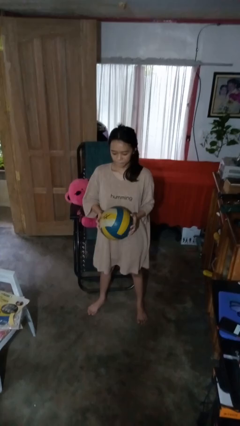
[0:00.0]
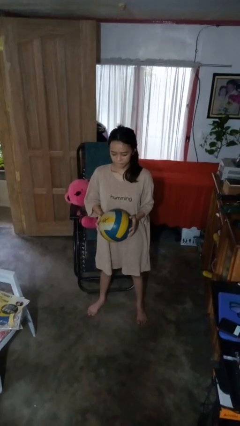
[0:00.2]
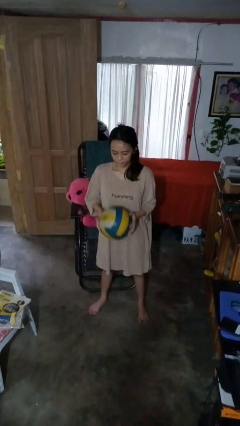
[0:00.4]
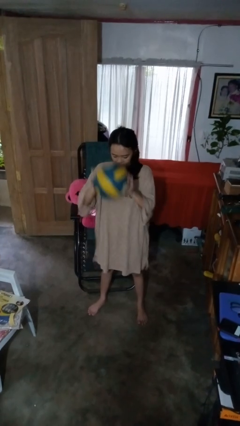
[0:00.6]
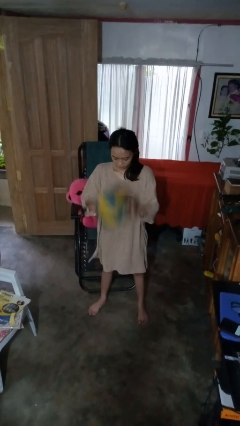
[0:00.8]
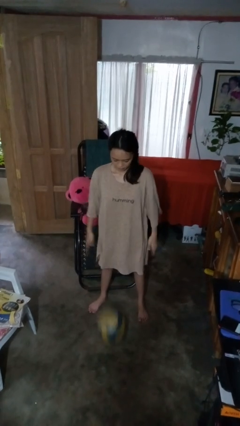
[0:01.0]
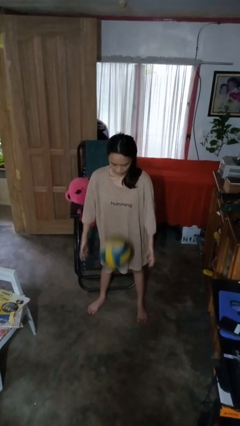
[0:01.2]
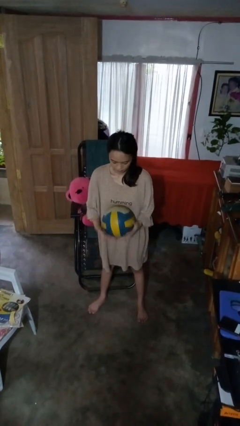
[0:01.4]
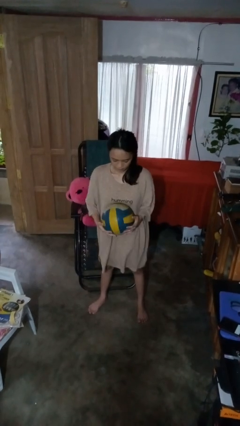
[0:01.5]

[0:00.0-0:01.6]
person bounces ball on floor

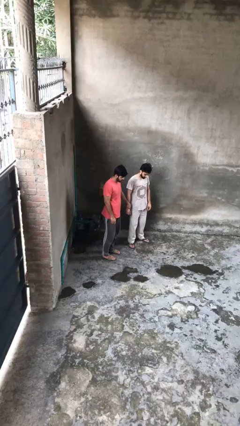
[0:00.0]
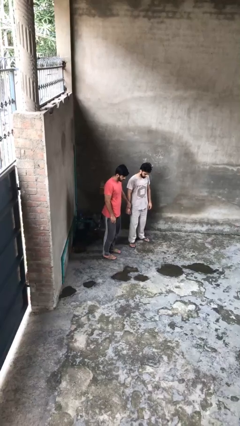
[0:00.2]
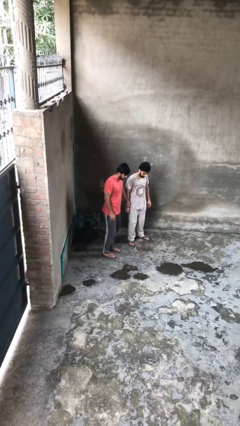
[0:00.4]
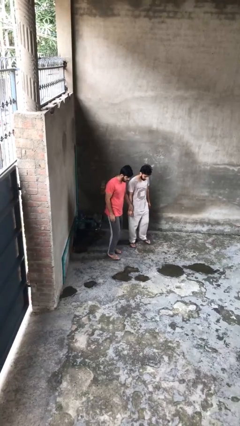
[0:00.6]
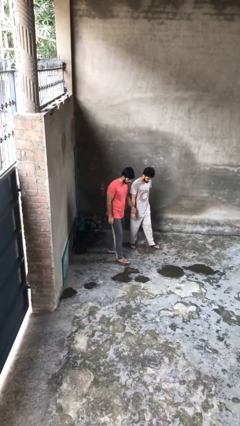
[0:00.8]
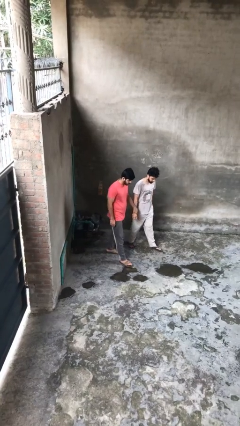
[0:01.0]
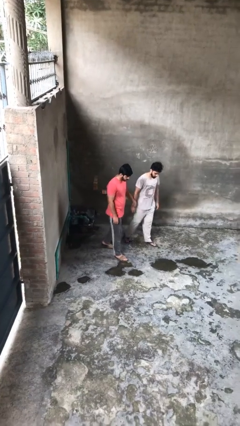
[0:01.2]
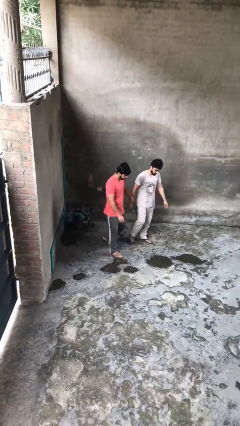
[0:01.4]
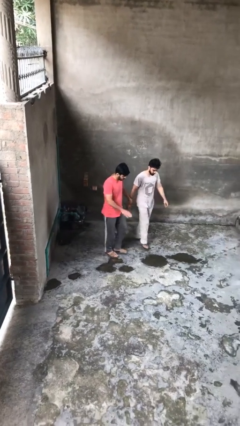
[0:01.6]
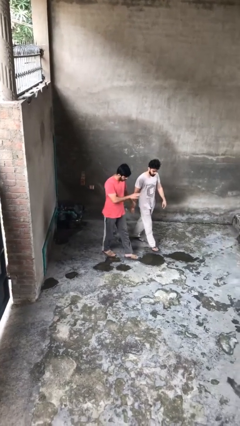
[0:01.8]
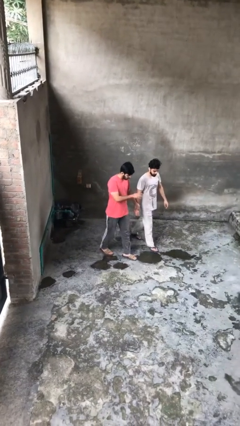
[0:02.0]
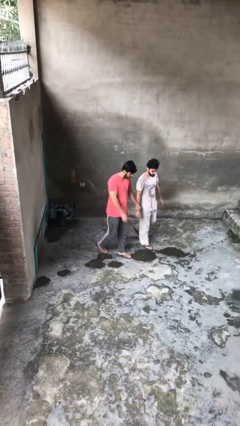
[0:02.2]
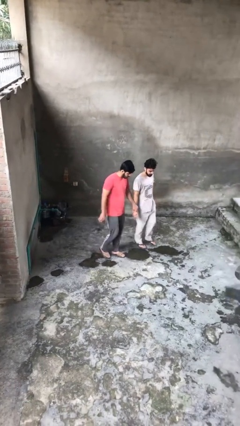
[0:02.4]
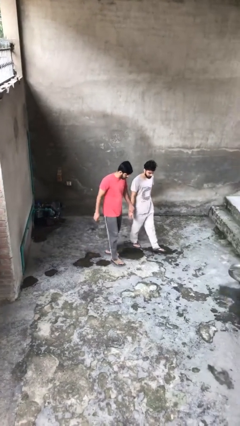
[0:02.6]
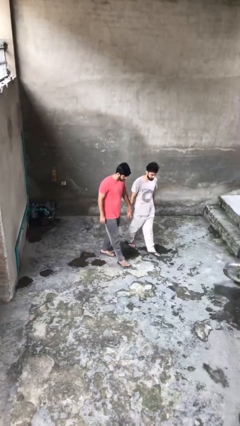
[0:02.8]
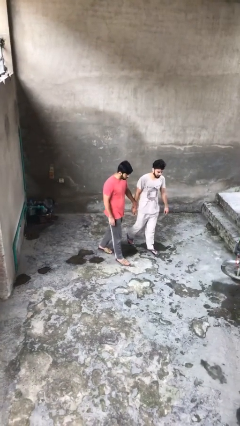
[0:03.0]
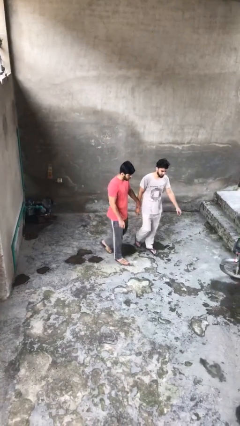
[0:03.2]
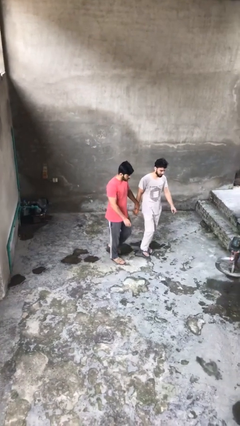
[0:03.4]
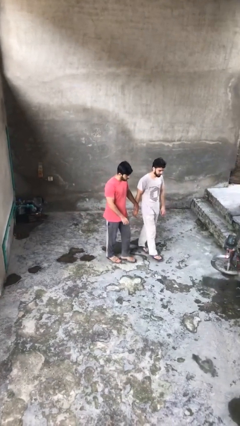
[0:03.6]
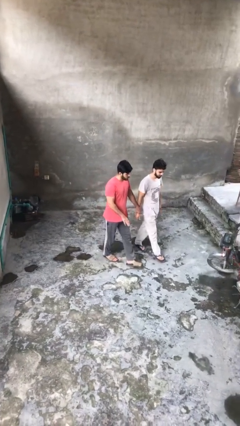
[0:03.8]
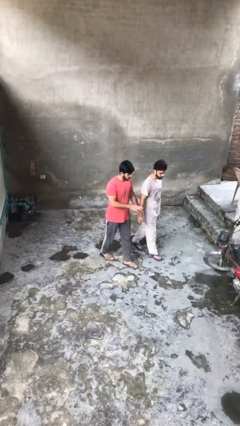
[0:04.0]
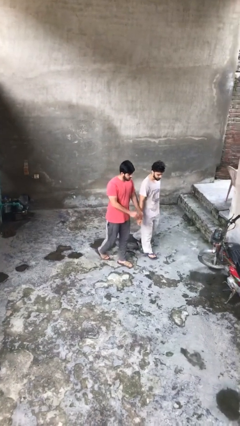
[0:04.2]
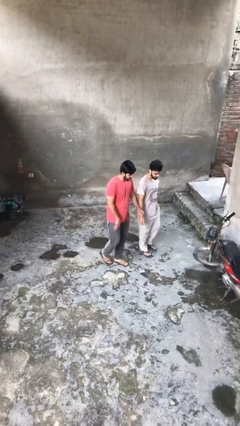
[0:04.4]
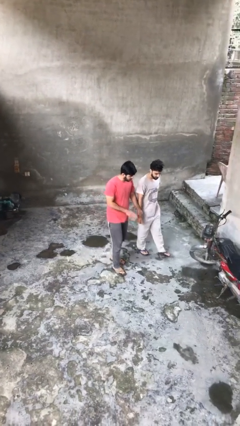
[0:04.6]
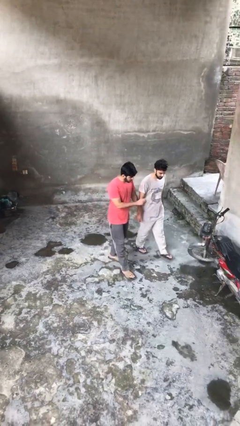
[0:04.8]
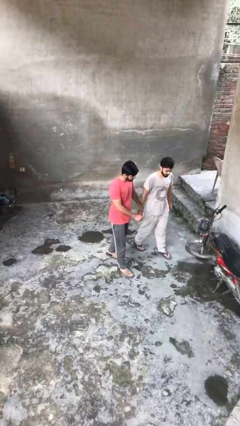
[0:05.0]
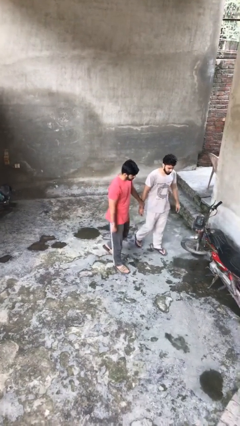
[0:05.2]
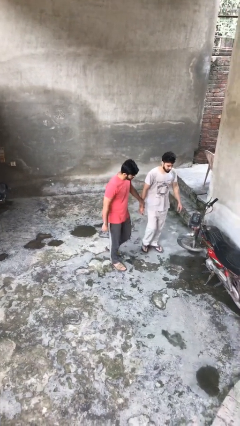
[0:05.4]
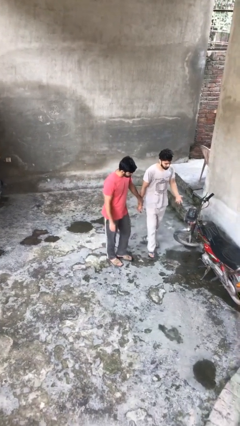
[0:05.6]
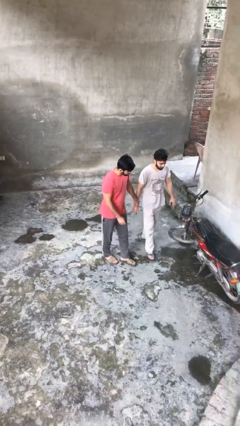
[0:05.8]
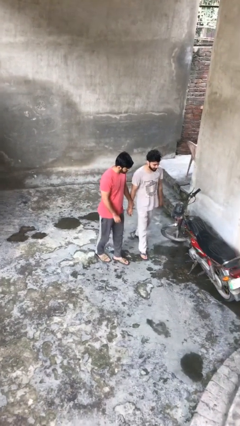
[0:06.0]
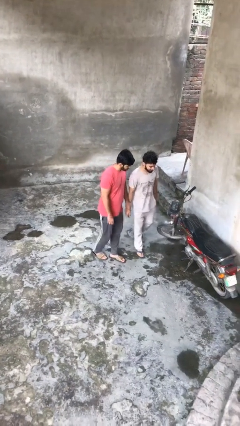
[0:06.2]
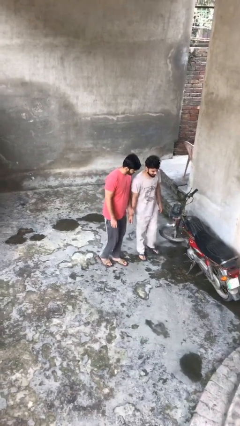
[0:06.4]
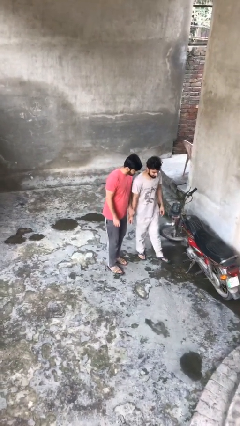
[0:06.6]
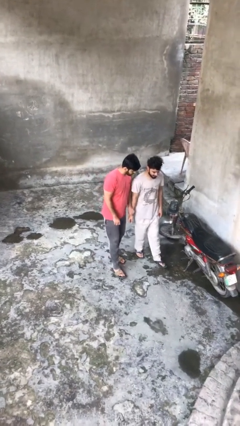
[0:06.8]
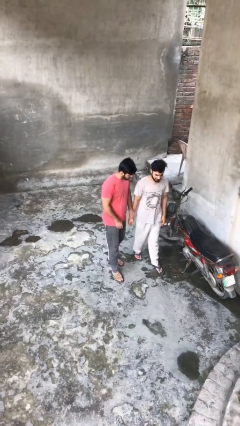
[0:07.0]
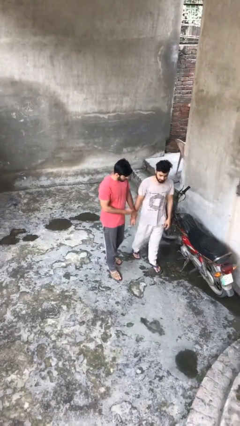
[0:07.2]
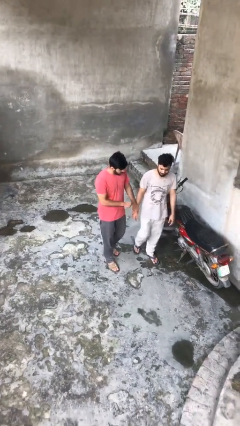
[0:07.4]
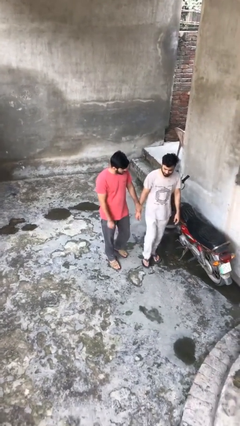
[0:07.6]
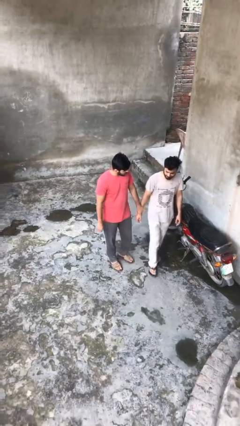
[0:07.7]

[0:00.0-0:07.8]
person holds hand

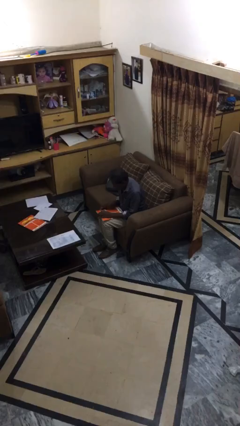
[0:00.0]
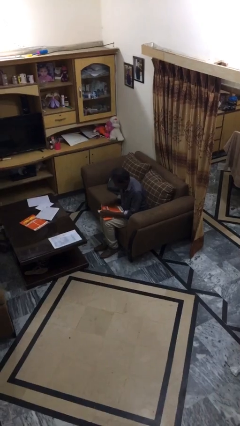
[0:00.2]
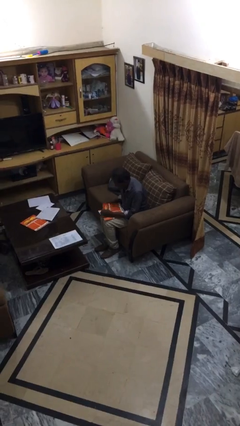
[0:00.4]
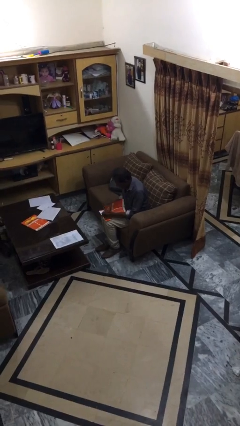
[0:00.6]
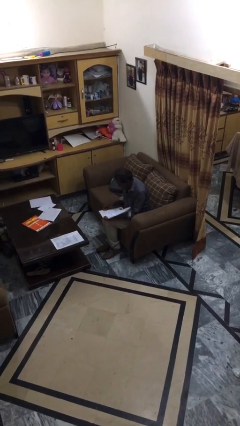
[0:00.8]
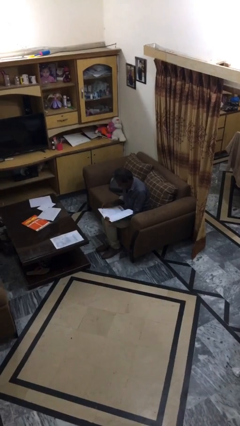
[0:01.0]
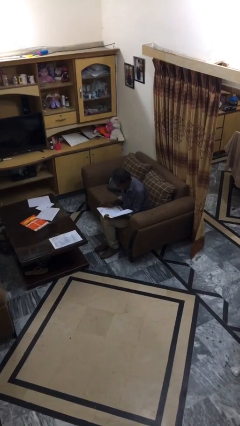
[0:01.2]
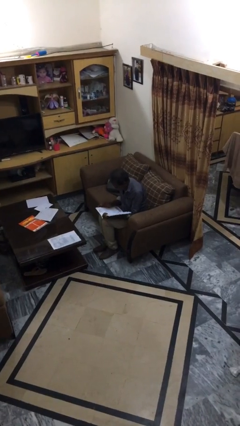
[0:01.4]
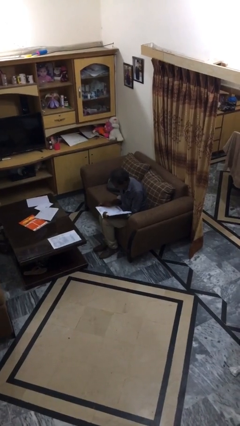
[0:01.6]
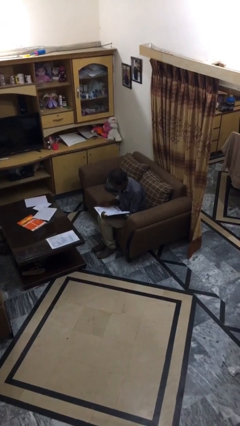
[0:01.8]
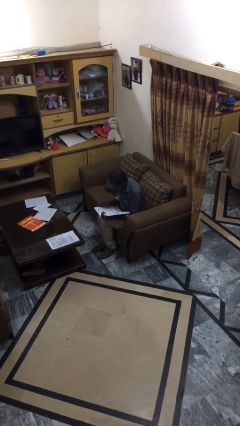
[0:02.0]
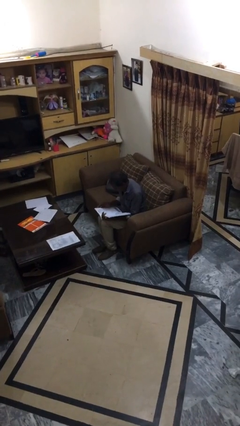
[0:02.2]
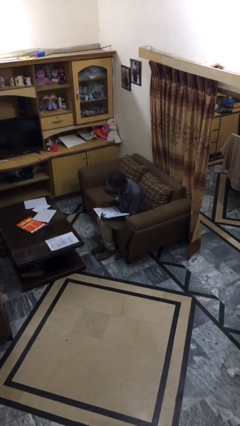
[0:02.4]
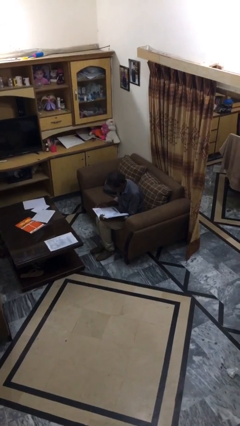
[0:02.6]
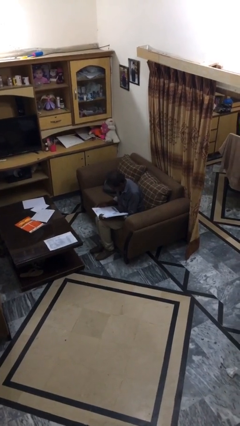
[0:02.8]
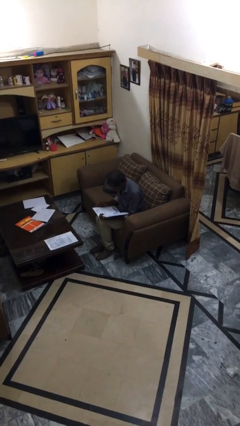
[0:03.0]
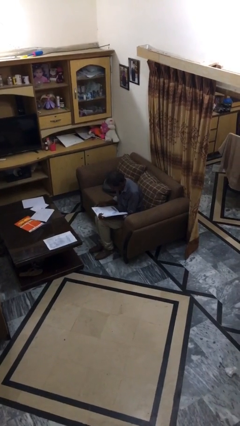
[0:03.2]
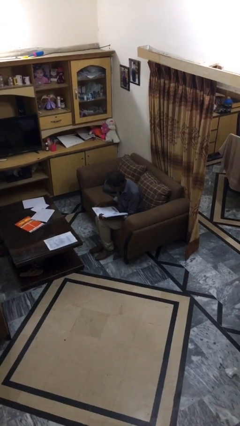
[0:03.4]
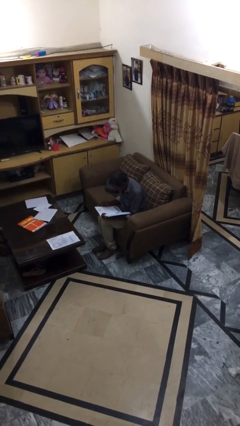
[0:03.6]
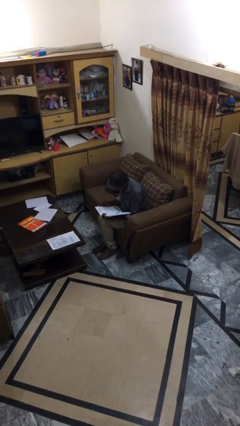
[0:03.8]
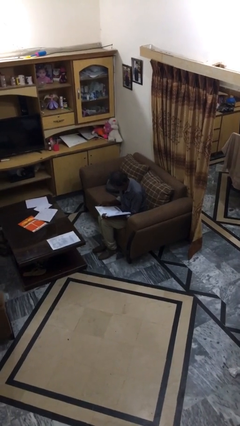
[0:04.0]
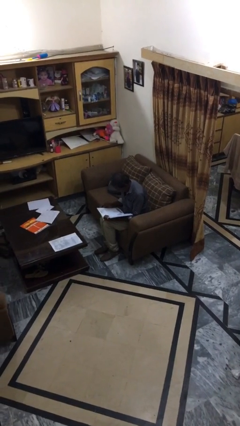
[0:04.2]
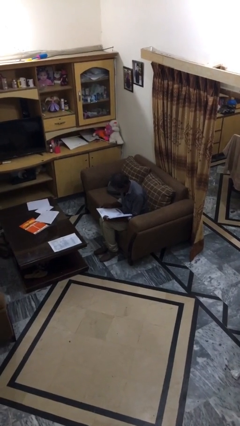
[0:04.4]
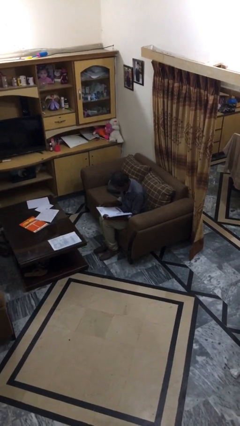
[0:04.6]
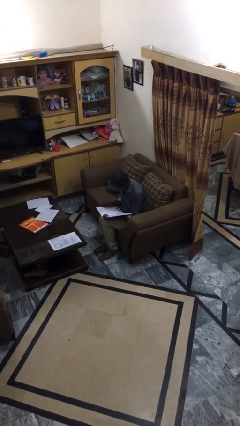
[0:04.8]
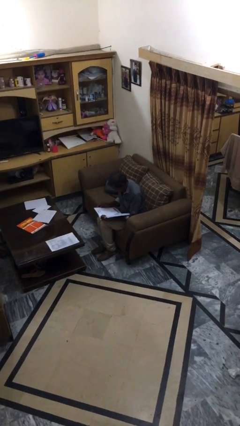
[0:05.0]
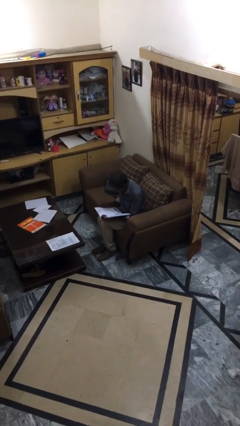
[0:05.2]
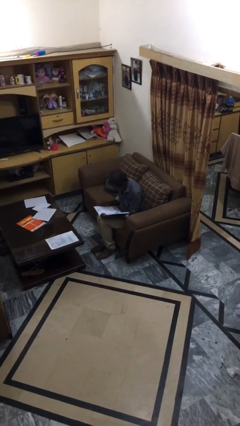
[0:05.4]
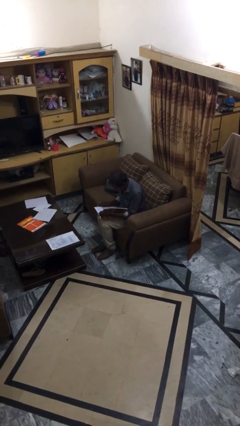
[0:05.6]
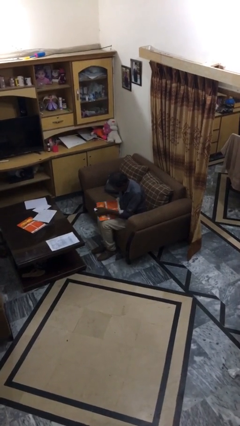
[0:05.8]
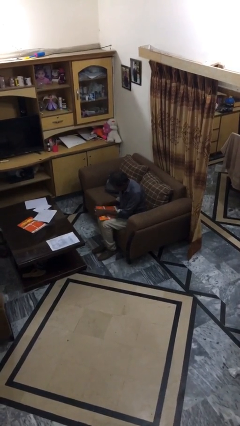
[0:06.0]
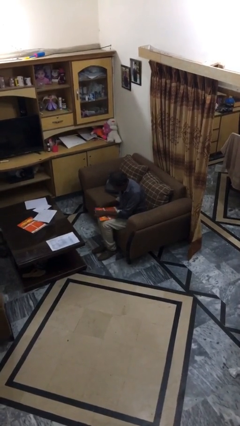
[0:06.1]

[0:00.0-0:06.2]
person reads document

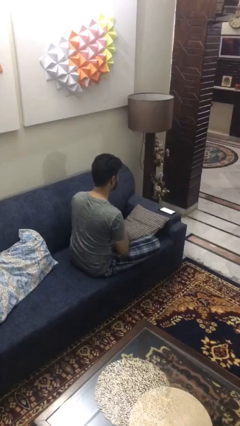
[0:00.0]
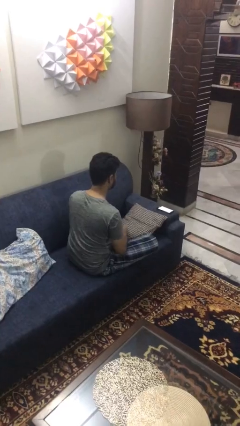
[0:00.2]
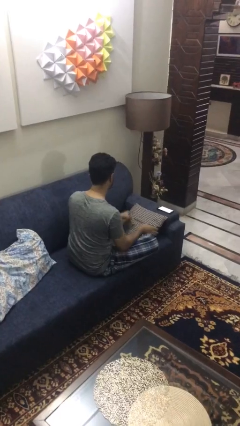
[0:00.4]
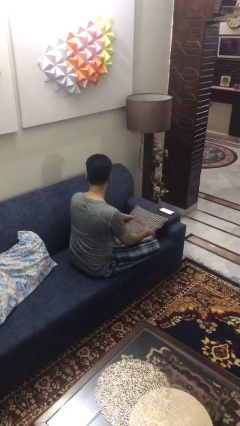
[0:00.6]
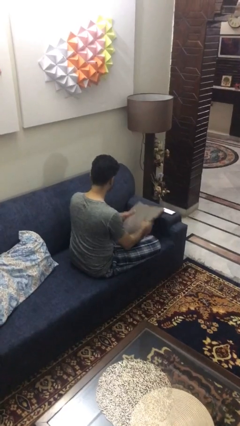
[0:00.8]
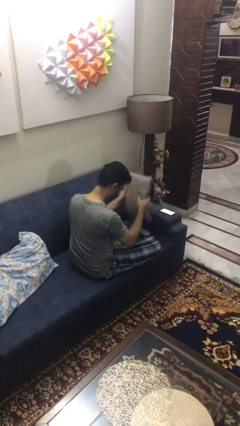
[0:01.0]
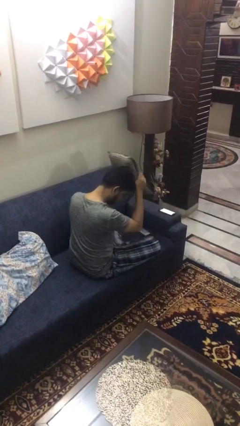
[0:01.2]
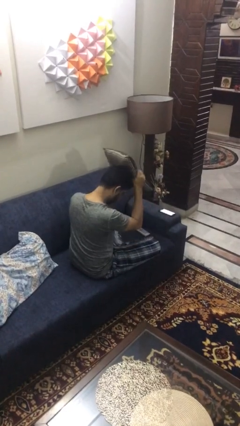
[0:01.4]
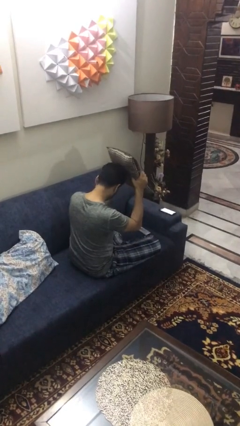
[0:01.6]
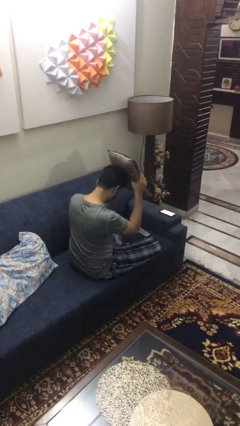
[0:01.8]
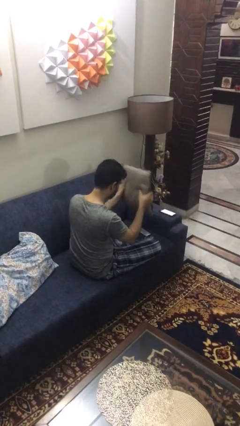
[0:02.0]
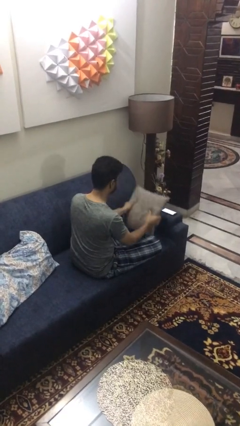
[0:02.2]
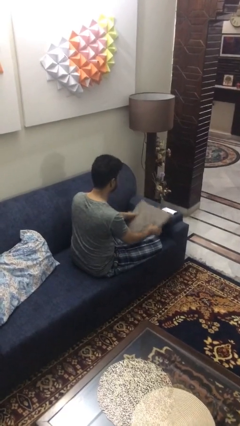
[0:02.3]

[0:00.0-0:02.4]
person searches in couch
